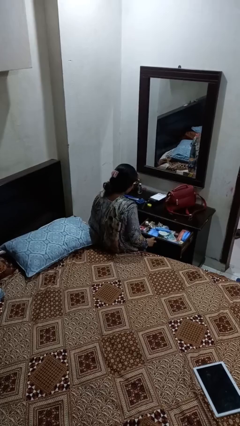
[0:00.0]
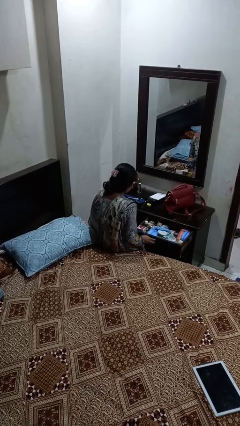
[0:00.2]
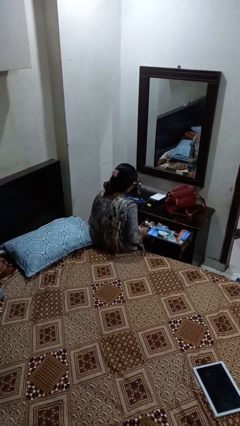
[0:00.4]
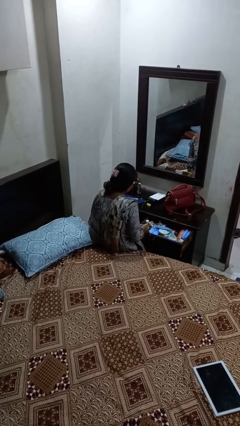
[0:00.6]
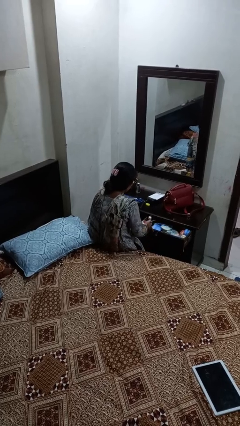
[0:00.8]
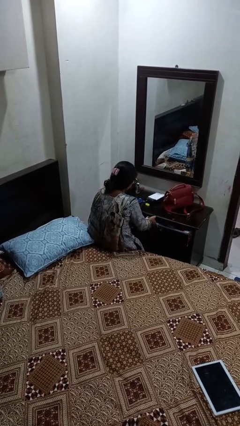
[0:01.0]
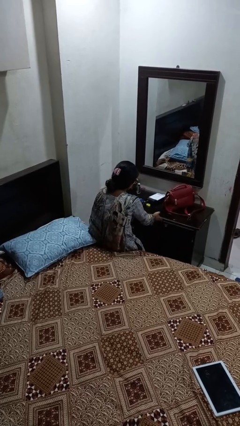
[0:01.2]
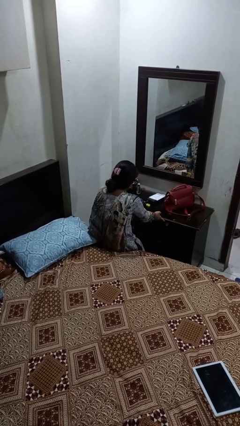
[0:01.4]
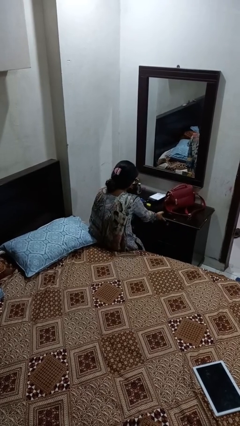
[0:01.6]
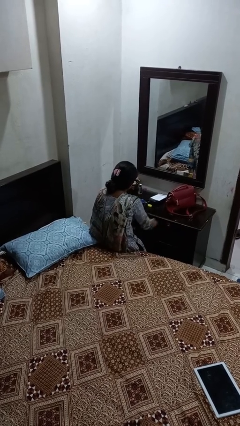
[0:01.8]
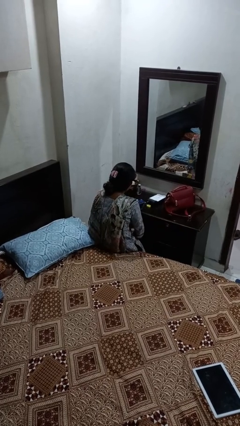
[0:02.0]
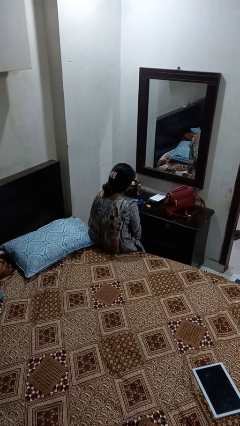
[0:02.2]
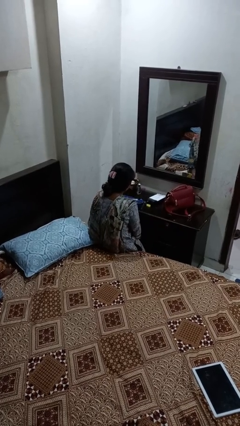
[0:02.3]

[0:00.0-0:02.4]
person closes dresser drawer

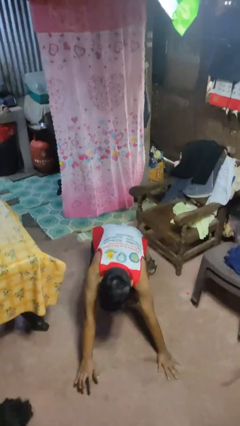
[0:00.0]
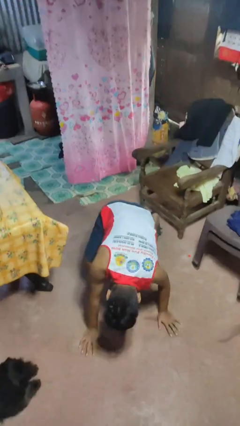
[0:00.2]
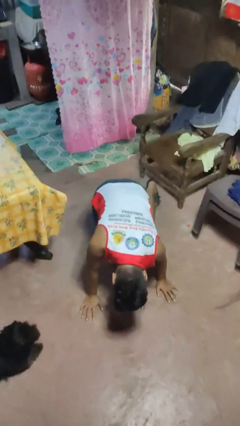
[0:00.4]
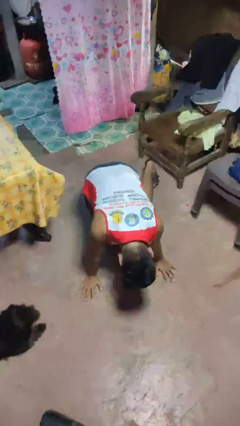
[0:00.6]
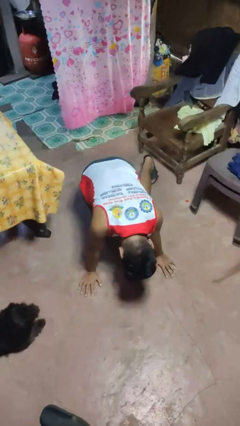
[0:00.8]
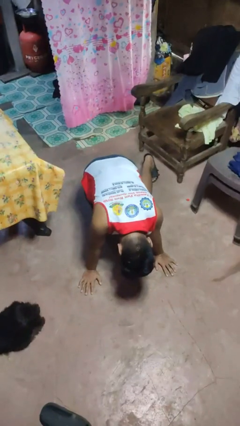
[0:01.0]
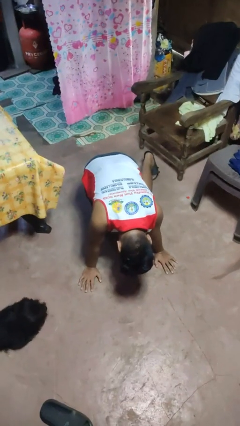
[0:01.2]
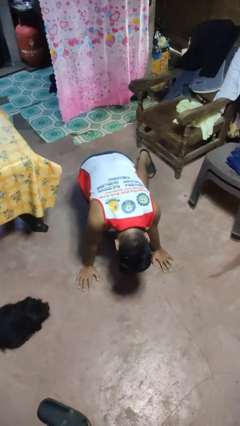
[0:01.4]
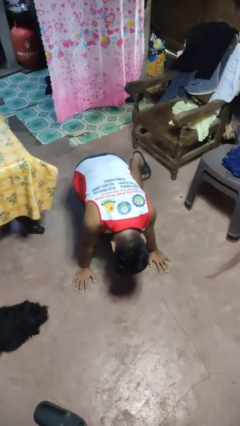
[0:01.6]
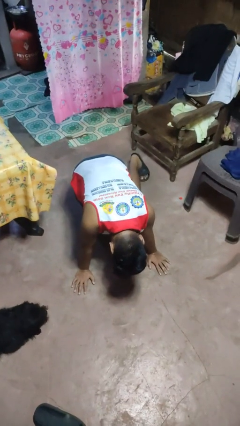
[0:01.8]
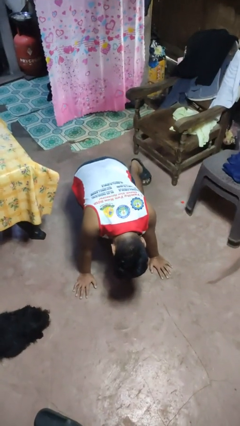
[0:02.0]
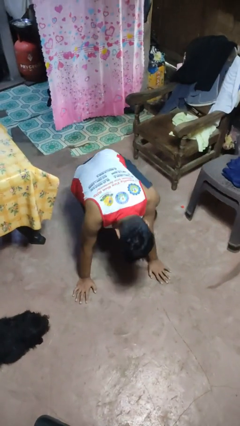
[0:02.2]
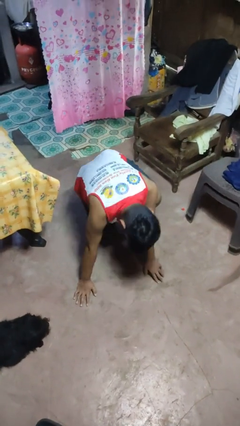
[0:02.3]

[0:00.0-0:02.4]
person lies down on floor

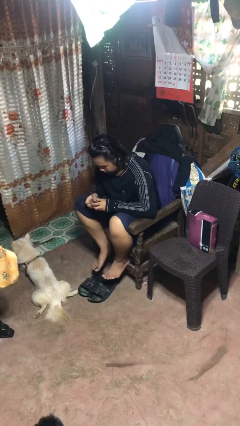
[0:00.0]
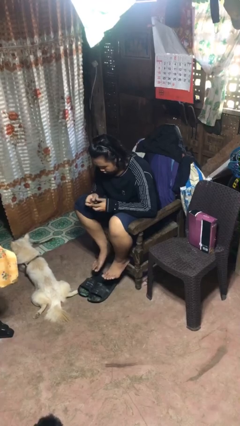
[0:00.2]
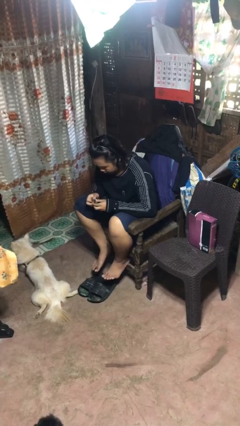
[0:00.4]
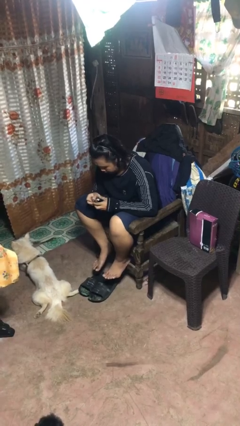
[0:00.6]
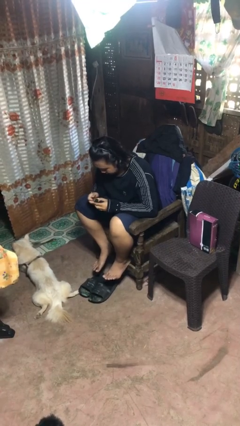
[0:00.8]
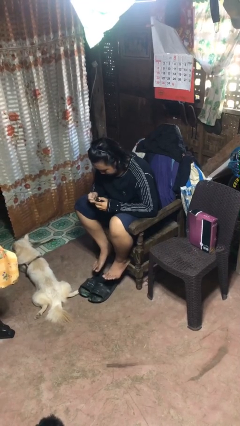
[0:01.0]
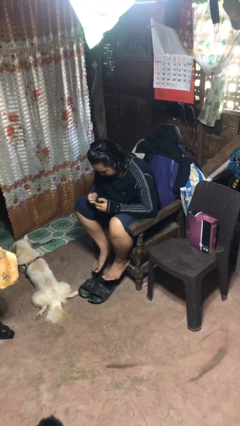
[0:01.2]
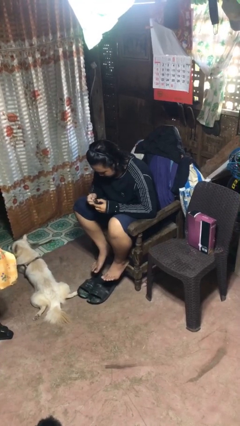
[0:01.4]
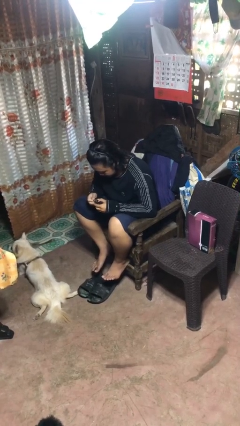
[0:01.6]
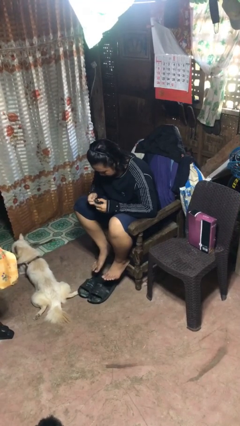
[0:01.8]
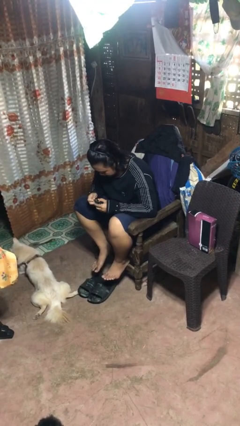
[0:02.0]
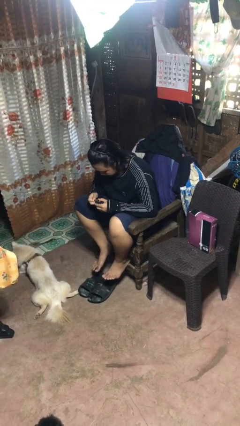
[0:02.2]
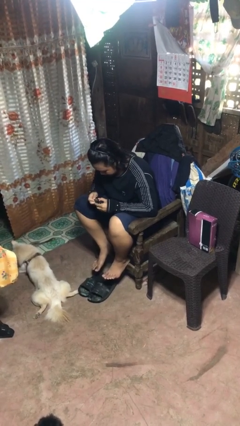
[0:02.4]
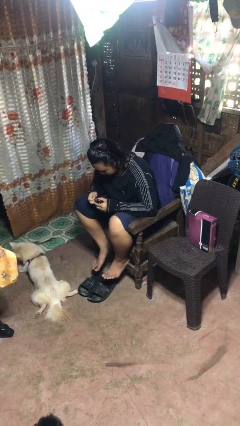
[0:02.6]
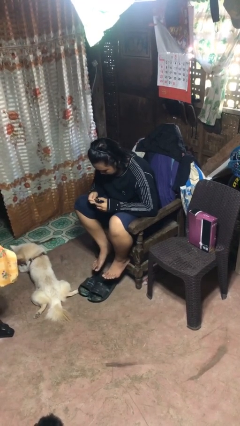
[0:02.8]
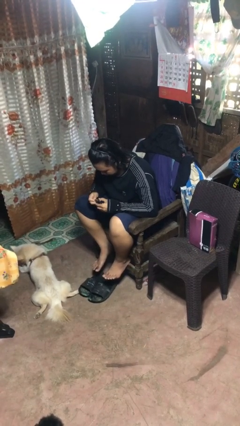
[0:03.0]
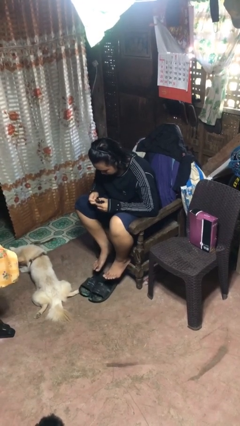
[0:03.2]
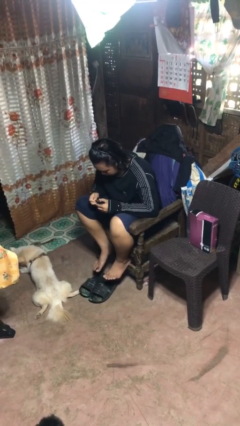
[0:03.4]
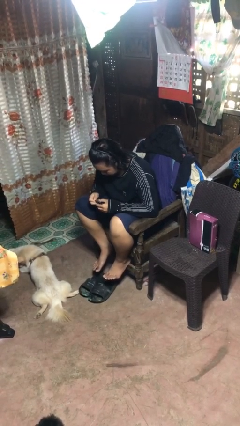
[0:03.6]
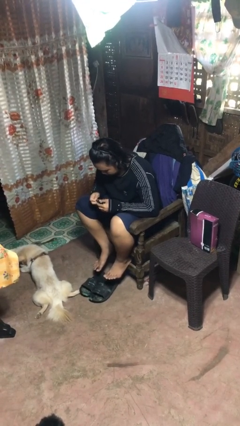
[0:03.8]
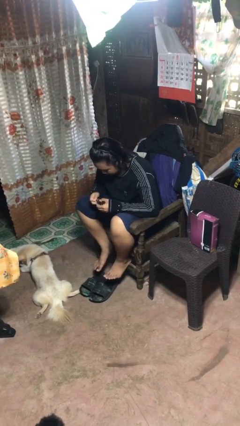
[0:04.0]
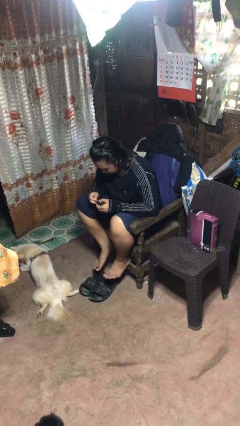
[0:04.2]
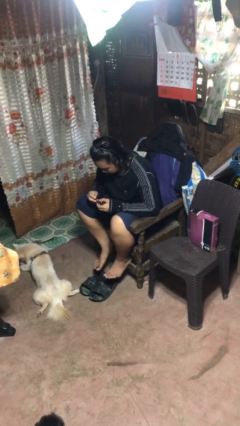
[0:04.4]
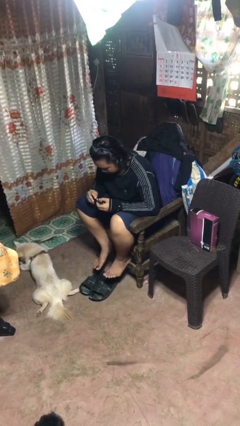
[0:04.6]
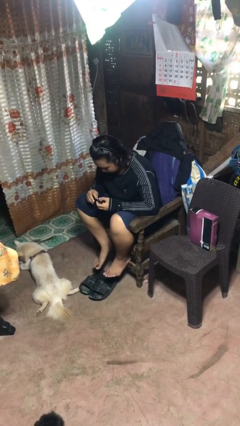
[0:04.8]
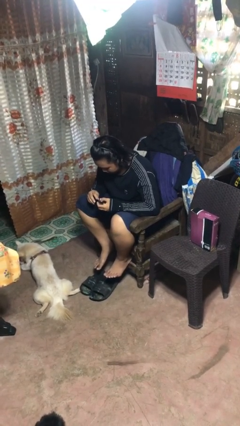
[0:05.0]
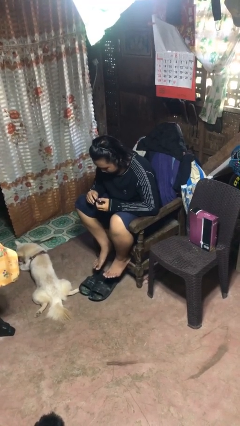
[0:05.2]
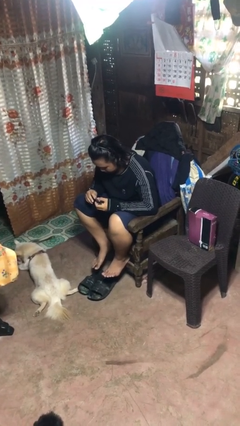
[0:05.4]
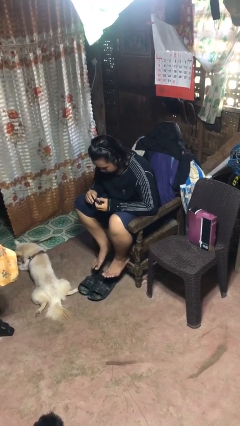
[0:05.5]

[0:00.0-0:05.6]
person clips fingernails

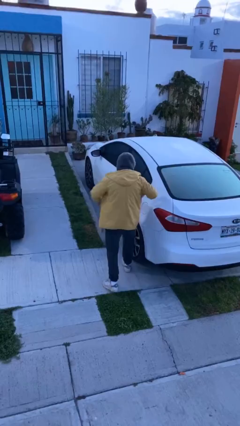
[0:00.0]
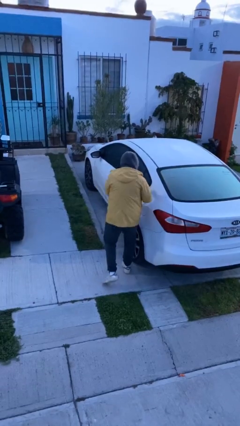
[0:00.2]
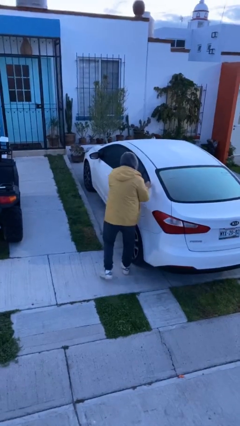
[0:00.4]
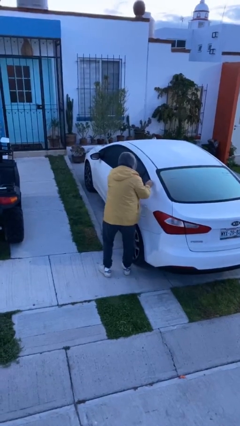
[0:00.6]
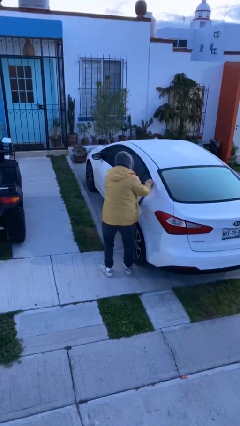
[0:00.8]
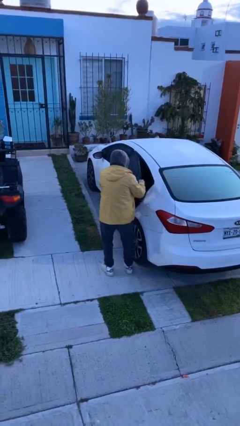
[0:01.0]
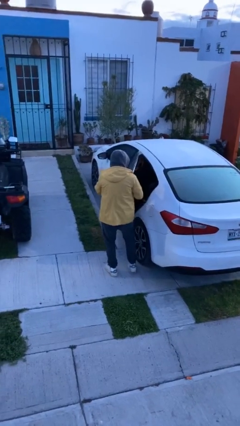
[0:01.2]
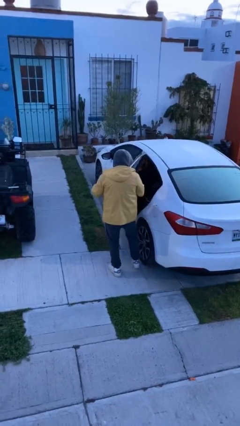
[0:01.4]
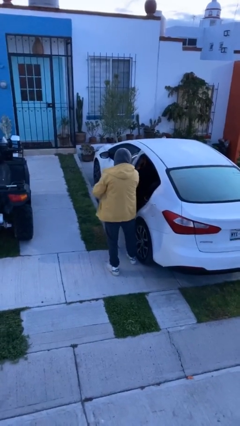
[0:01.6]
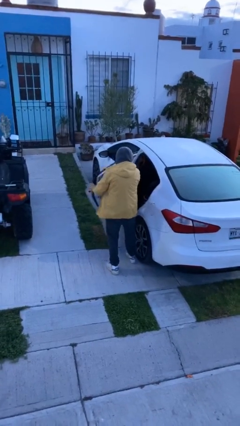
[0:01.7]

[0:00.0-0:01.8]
person opens car door

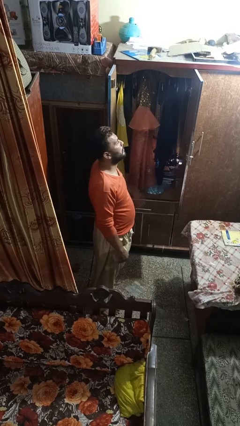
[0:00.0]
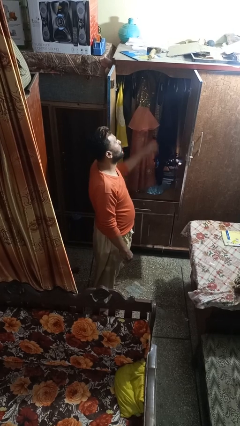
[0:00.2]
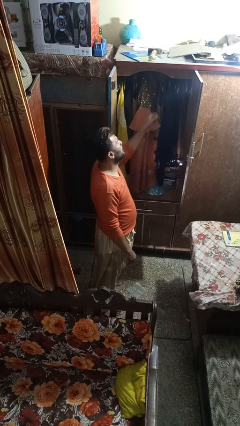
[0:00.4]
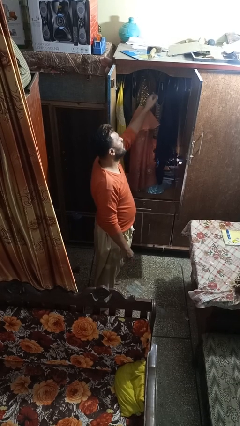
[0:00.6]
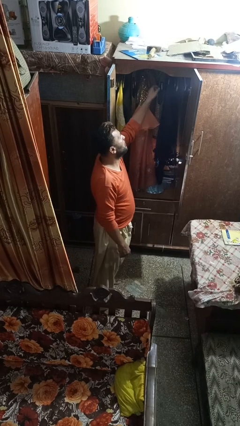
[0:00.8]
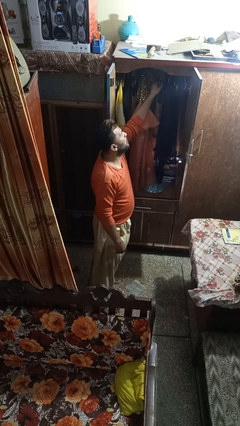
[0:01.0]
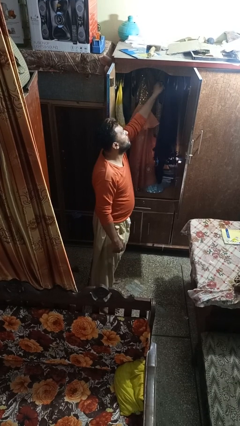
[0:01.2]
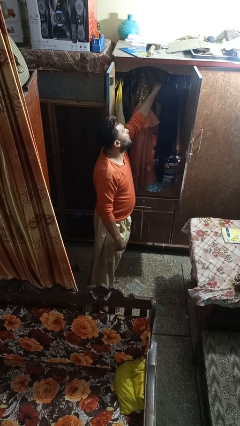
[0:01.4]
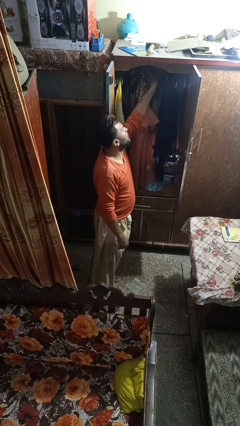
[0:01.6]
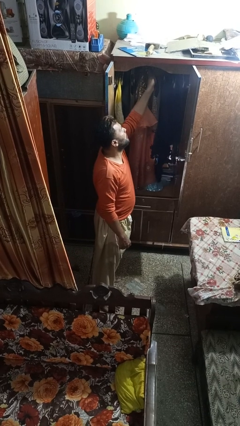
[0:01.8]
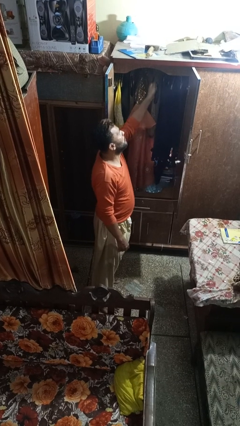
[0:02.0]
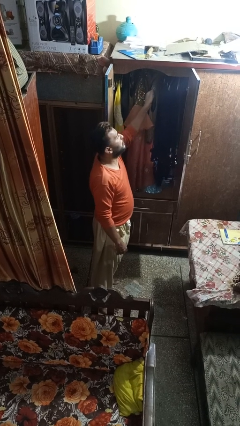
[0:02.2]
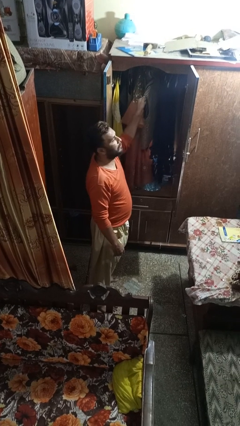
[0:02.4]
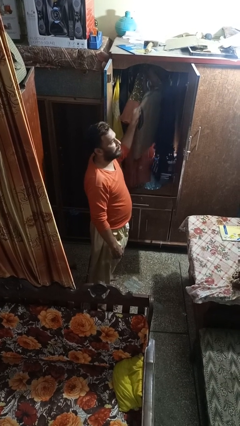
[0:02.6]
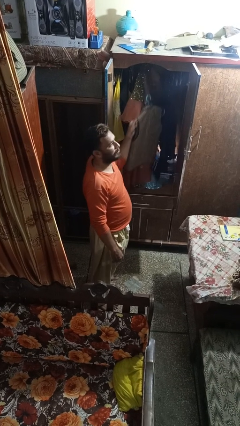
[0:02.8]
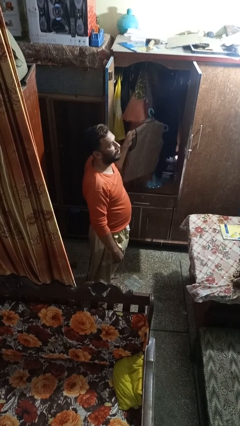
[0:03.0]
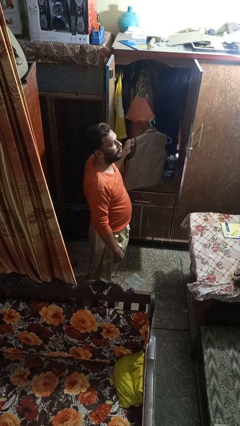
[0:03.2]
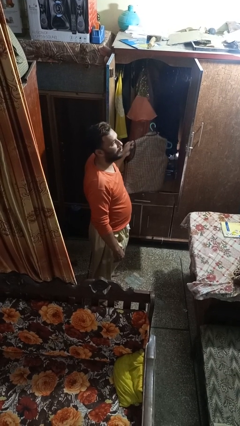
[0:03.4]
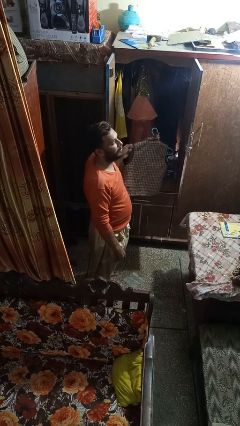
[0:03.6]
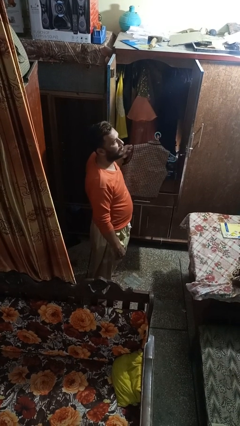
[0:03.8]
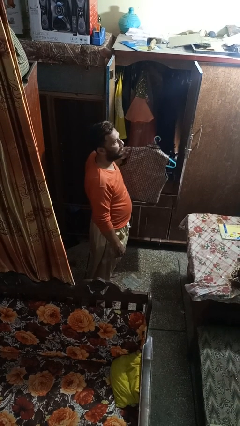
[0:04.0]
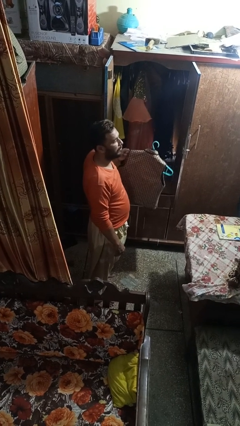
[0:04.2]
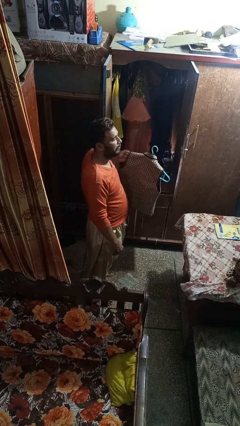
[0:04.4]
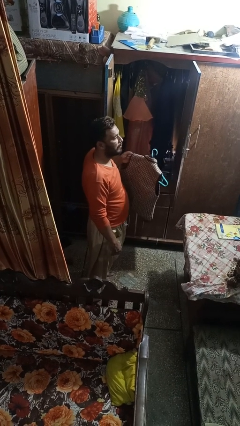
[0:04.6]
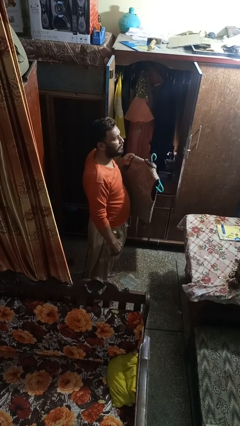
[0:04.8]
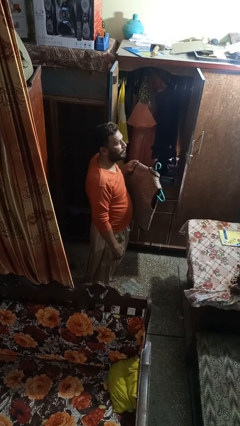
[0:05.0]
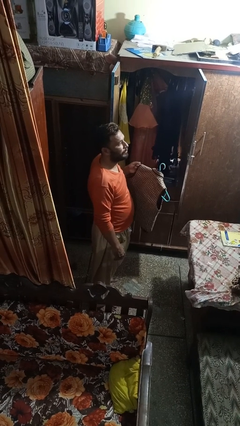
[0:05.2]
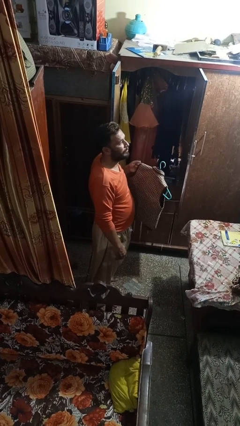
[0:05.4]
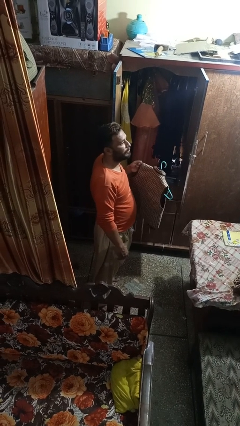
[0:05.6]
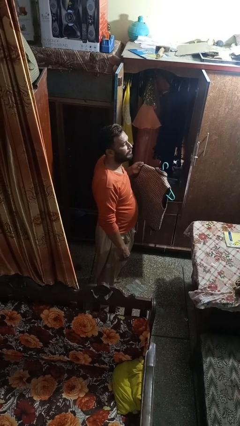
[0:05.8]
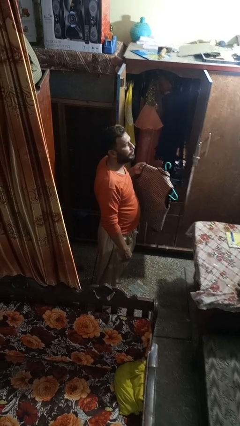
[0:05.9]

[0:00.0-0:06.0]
person takes clothes from closet
